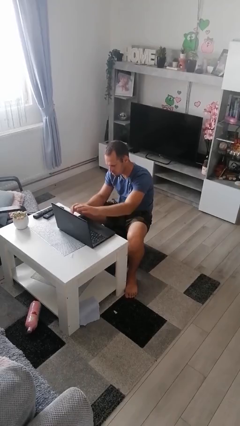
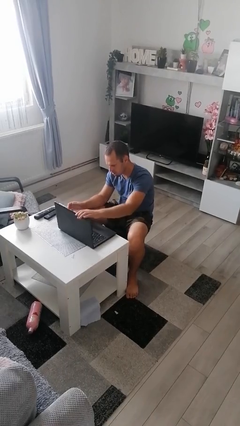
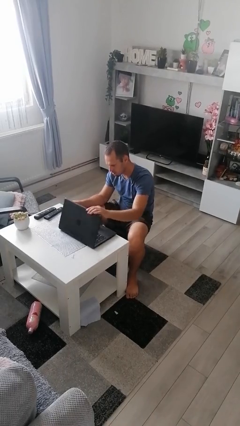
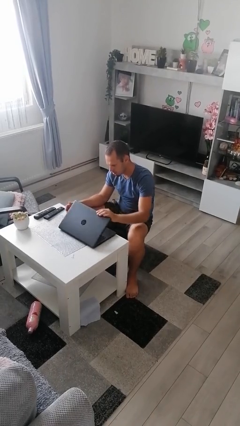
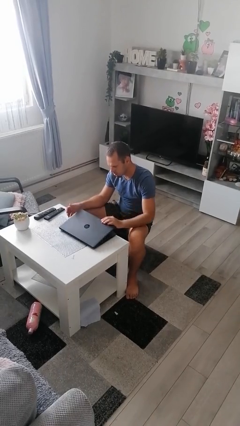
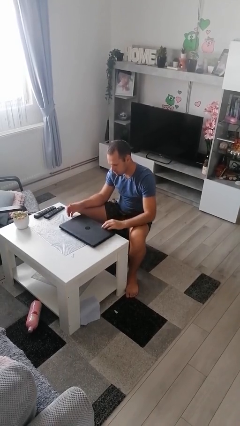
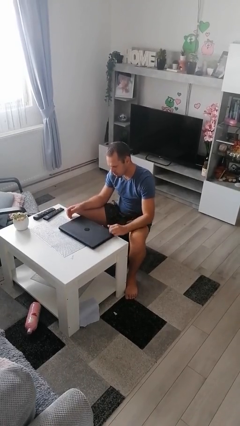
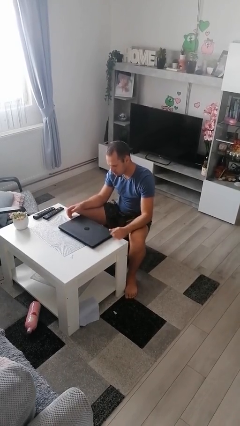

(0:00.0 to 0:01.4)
person closes laptop

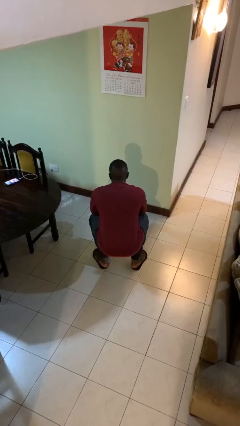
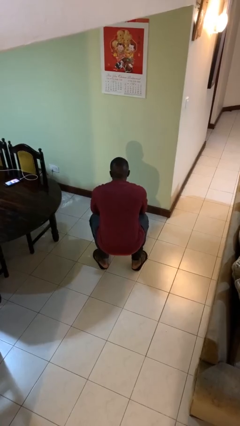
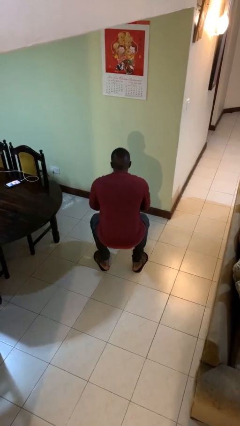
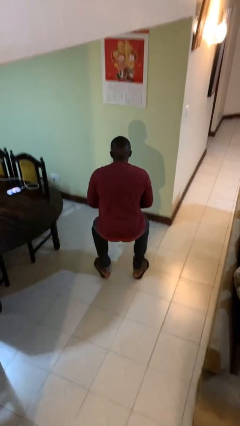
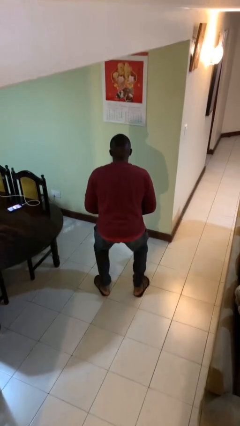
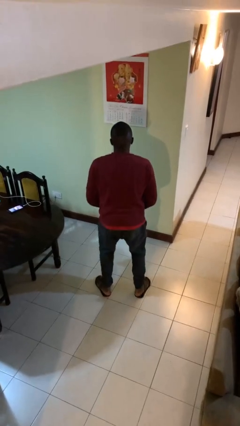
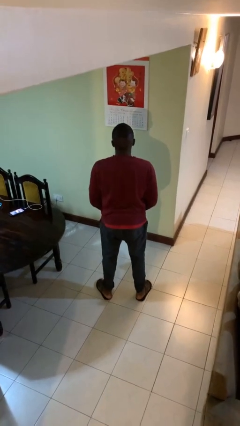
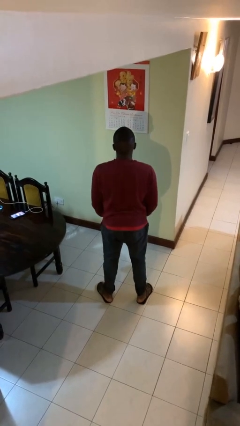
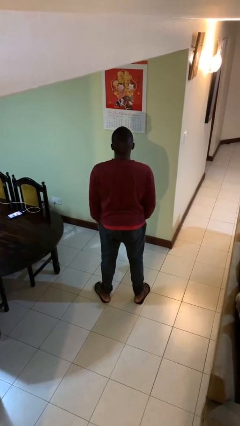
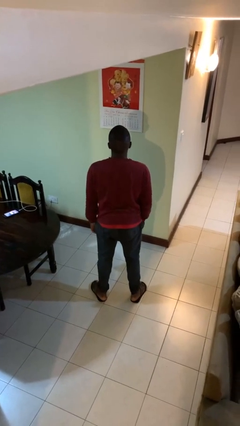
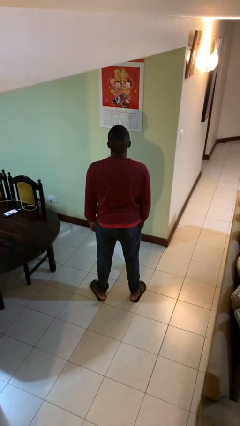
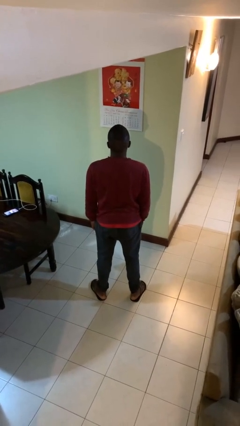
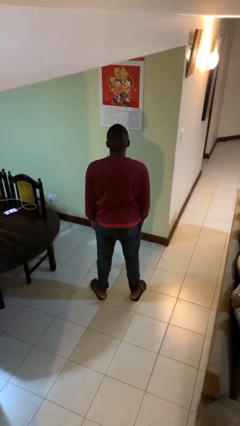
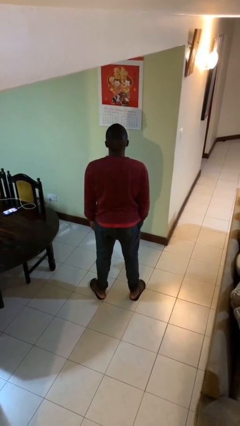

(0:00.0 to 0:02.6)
person stands up

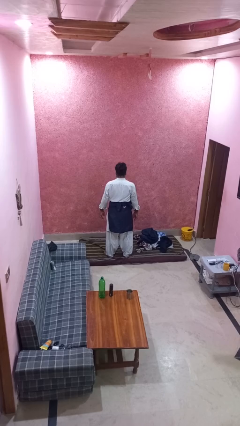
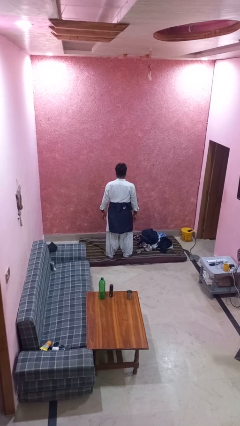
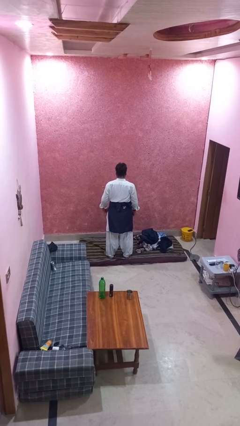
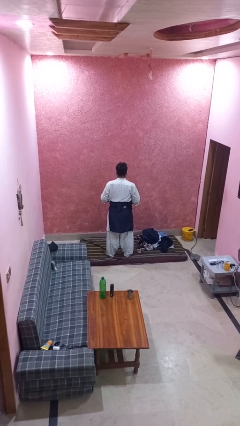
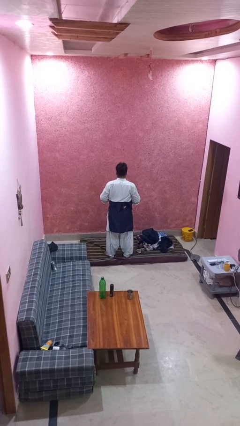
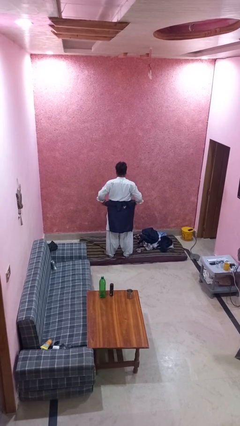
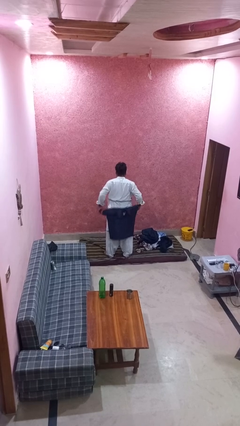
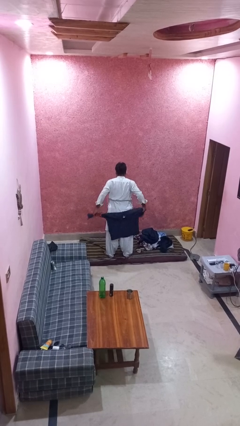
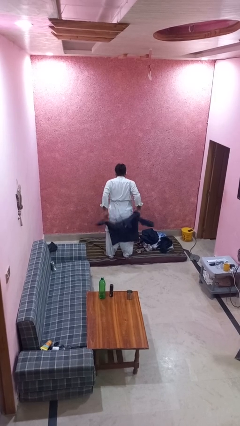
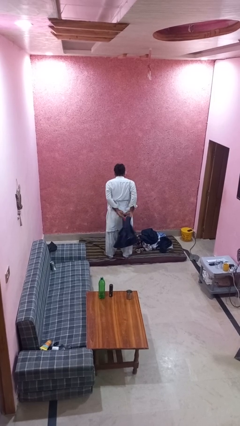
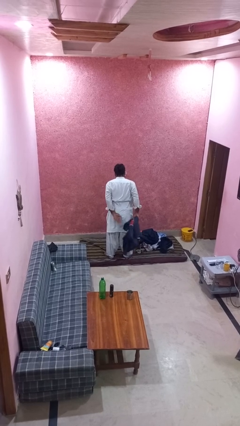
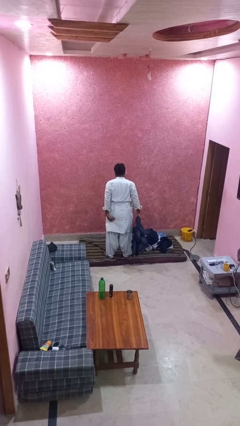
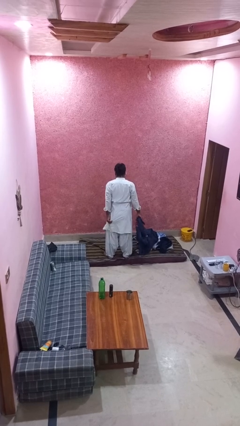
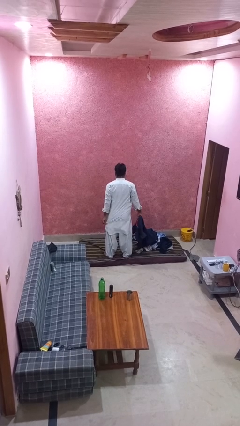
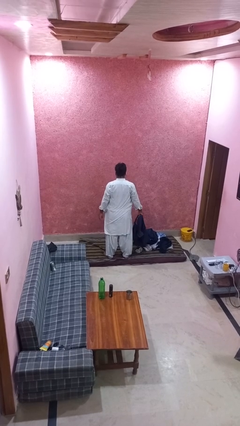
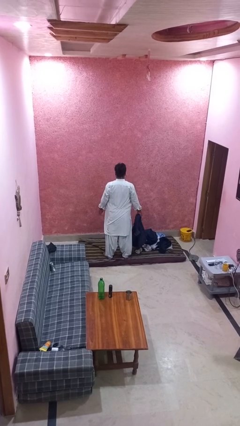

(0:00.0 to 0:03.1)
person unties jacket around waist

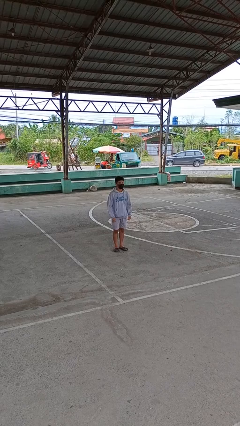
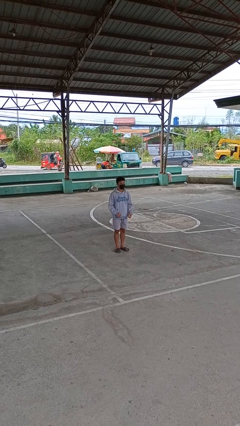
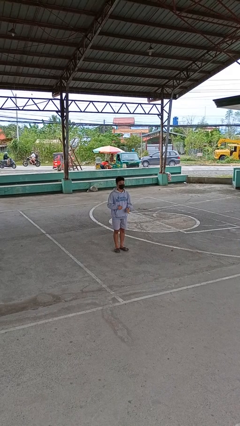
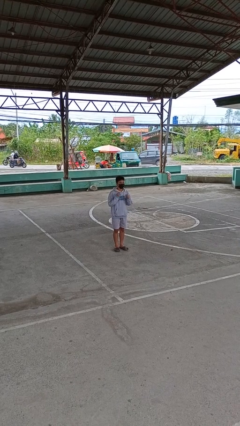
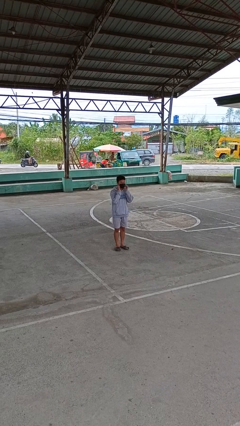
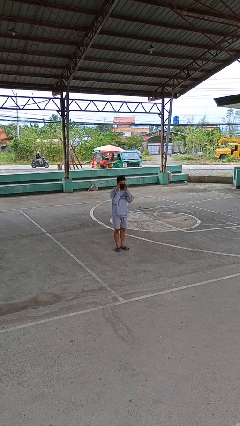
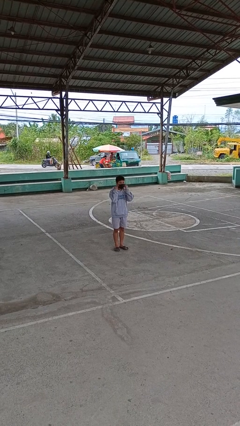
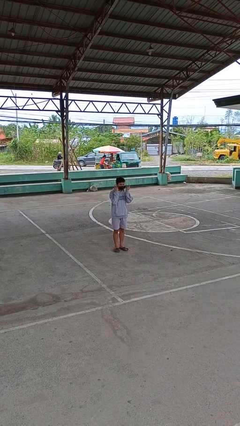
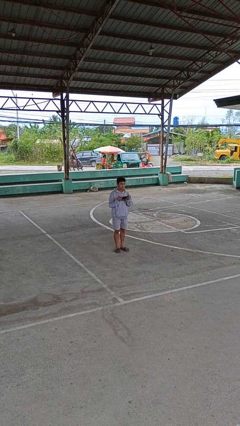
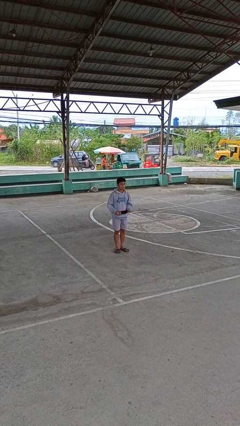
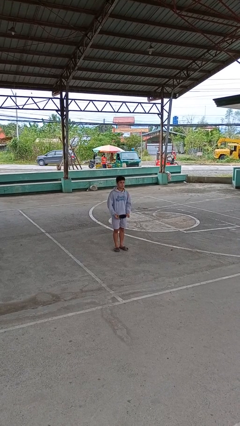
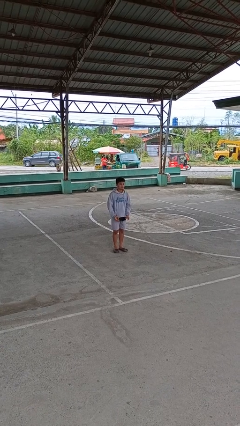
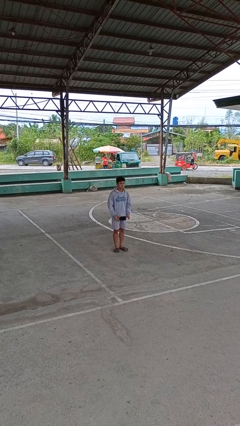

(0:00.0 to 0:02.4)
person takes off facemask

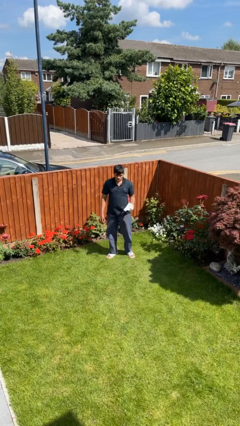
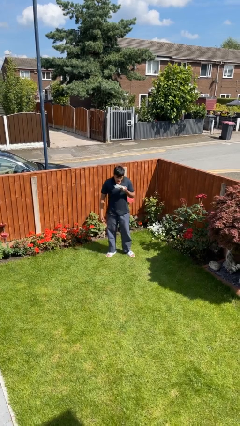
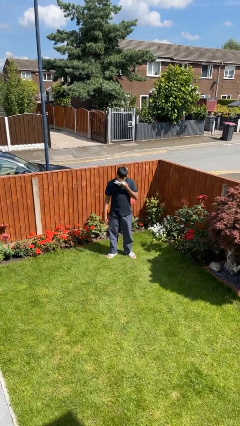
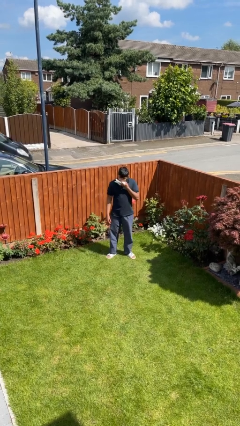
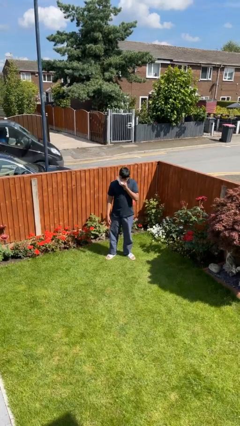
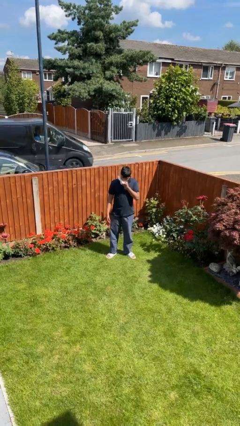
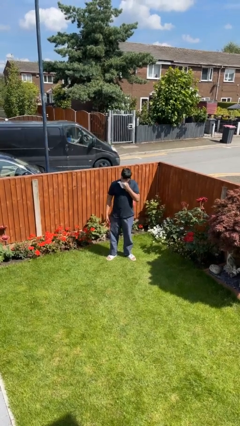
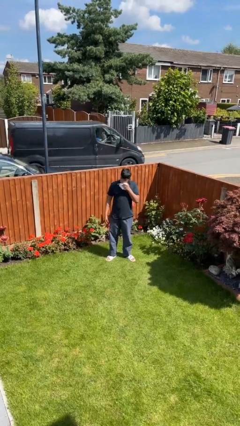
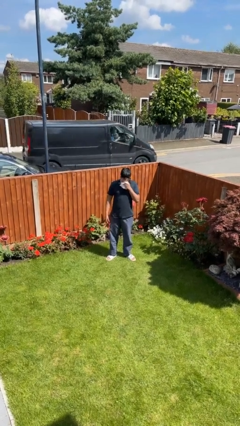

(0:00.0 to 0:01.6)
person wipes mouth with napkin

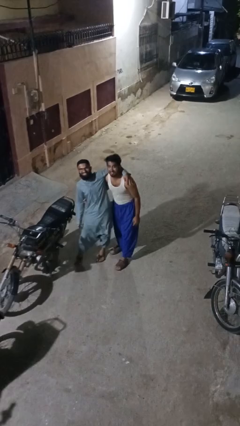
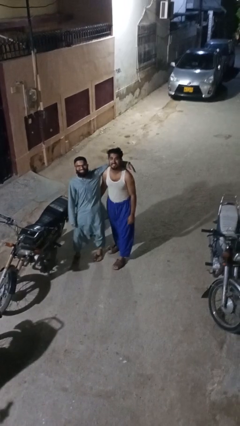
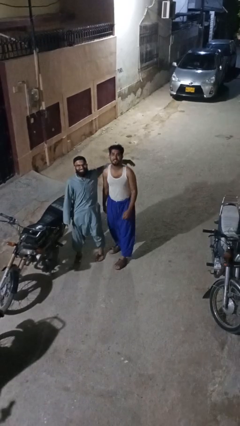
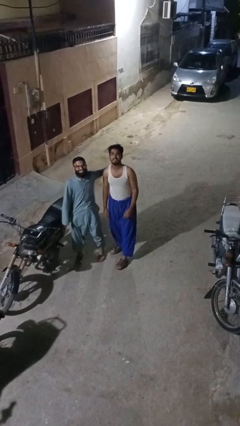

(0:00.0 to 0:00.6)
person puts down person

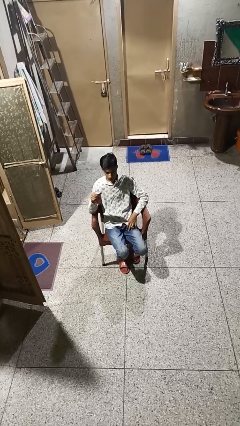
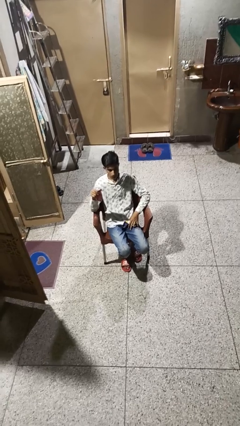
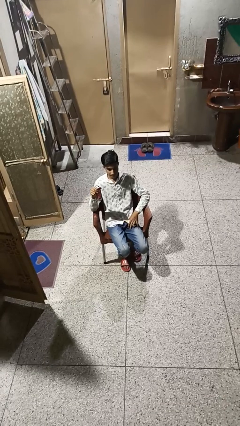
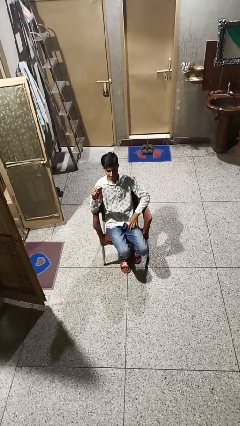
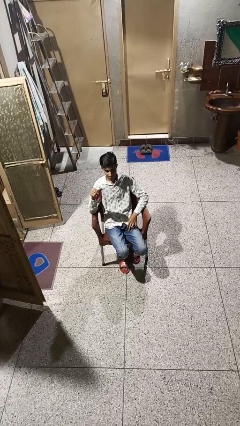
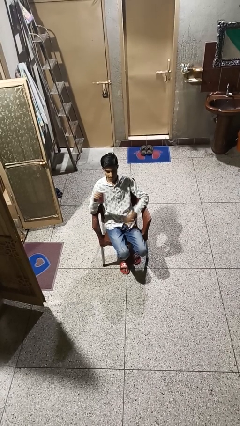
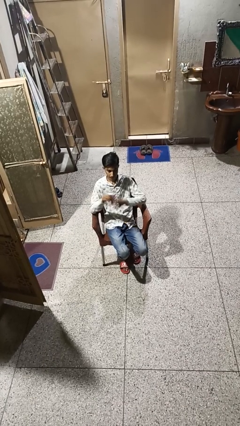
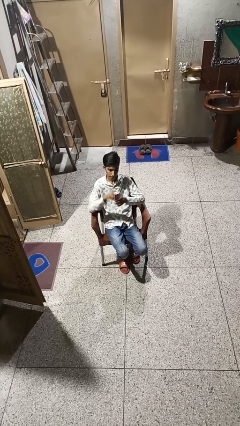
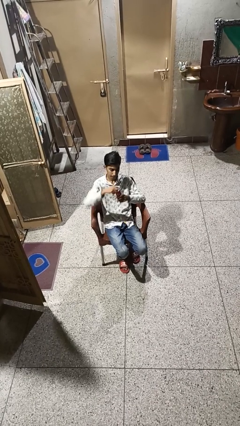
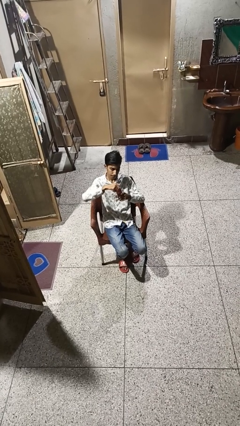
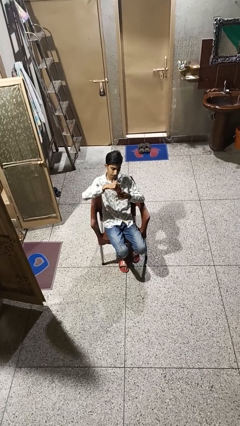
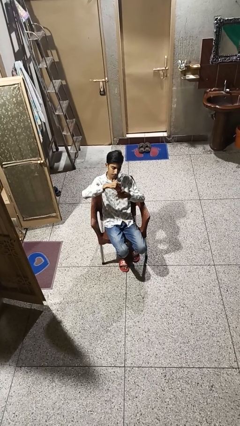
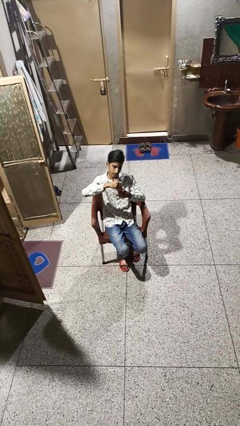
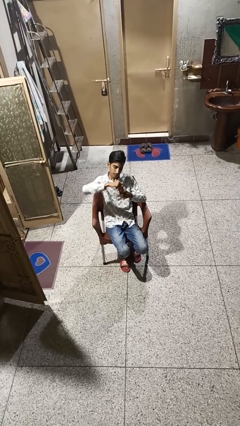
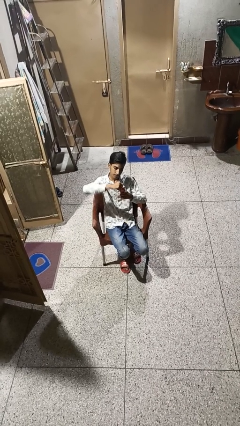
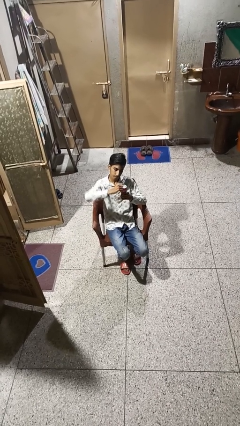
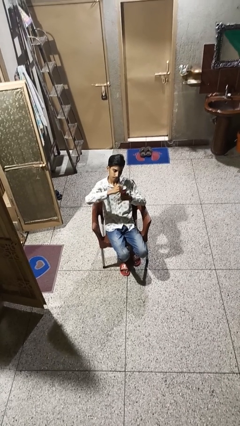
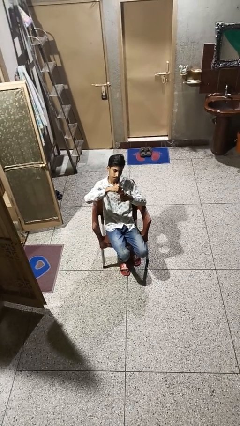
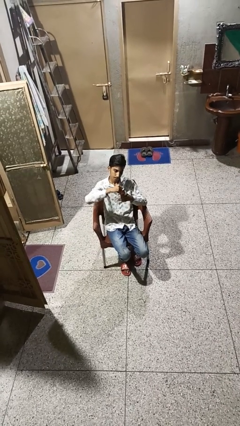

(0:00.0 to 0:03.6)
person opens beverage can

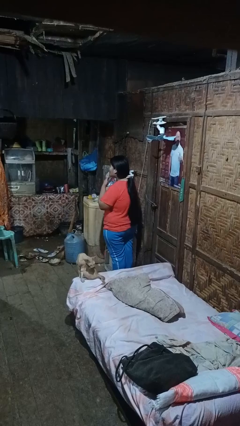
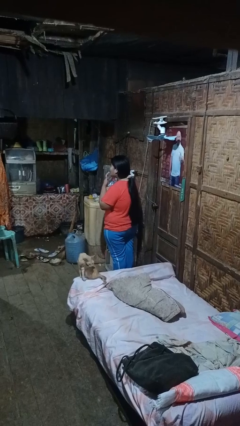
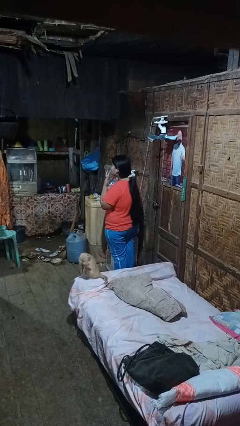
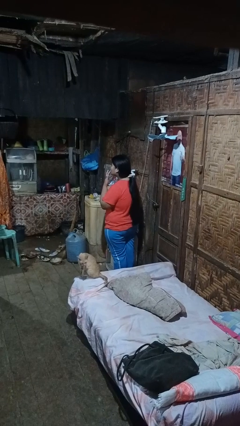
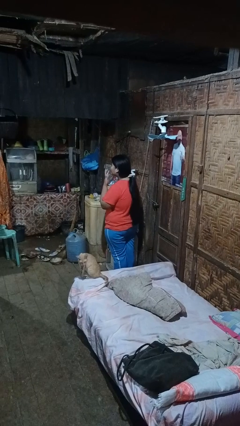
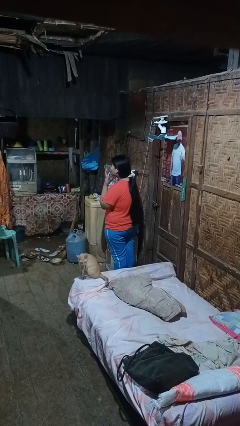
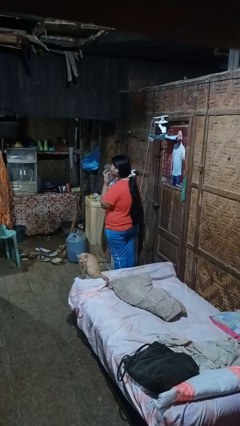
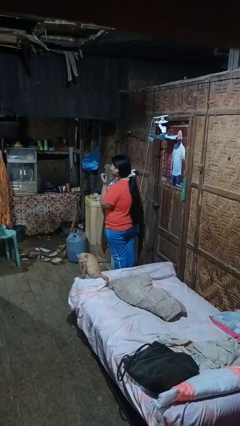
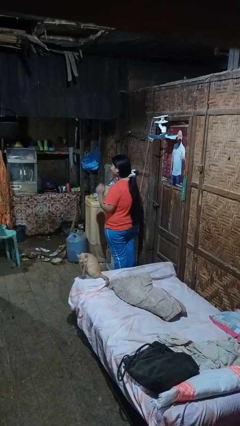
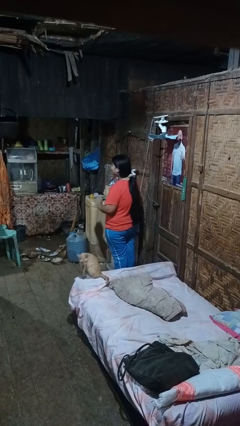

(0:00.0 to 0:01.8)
person licks fingers
